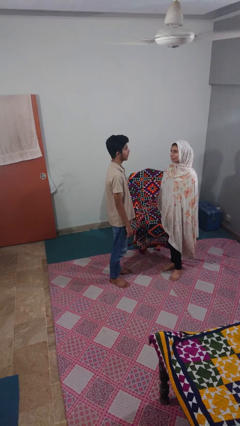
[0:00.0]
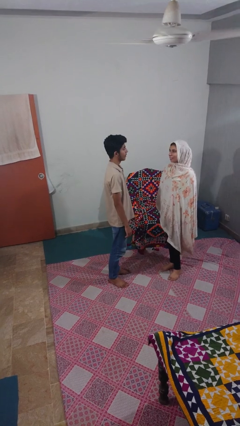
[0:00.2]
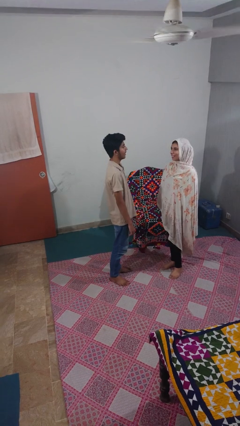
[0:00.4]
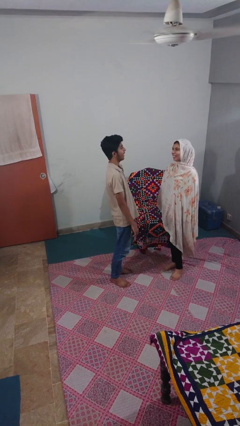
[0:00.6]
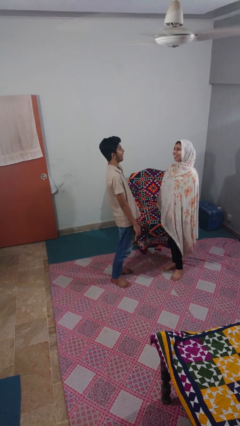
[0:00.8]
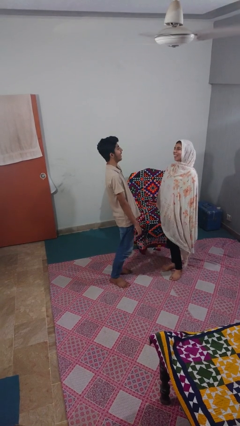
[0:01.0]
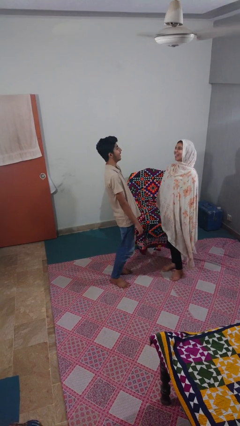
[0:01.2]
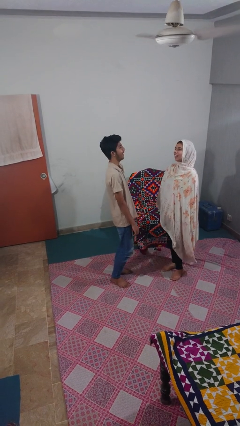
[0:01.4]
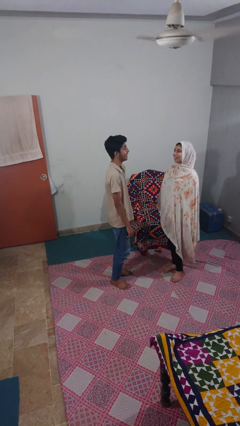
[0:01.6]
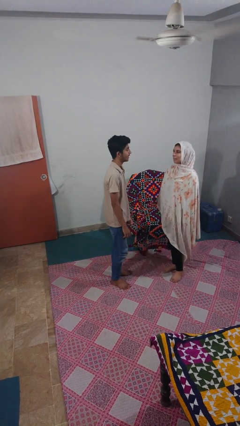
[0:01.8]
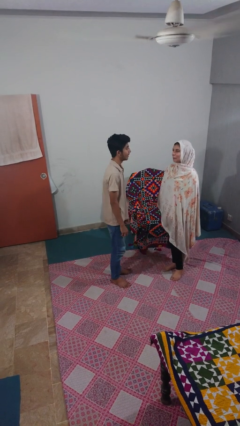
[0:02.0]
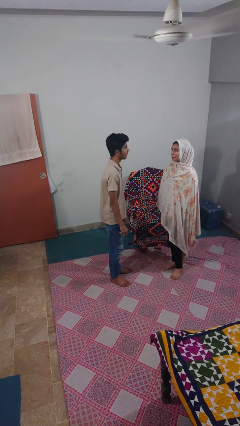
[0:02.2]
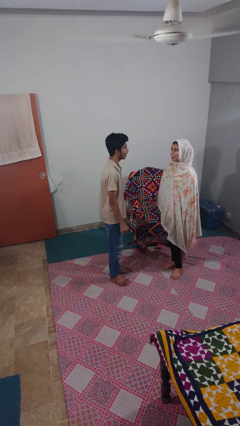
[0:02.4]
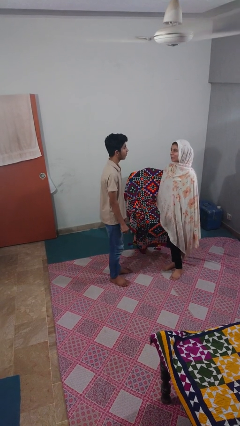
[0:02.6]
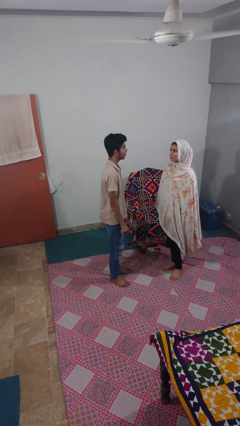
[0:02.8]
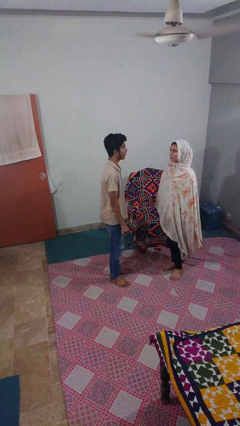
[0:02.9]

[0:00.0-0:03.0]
person laughs with person

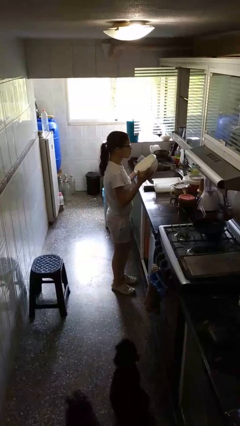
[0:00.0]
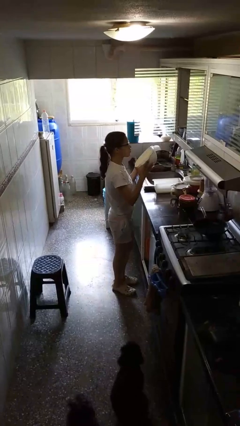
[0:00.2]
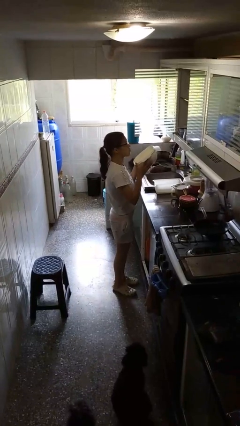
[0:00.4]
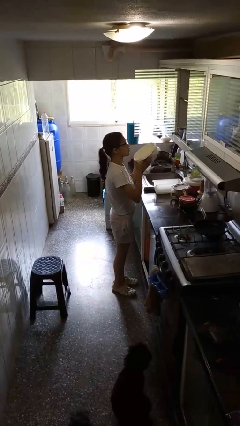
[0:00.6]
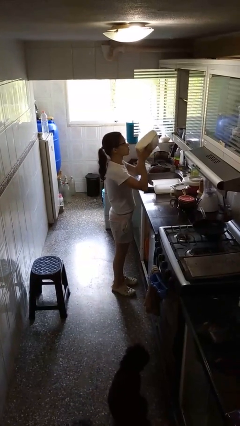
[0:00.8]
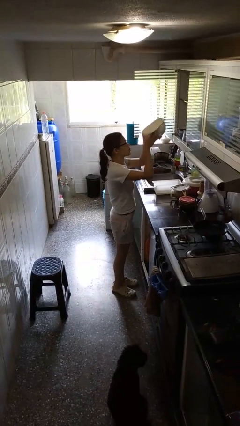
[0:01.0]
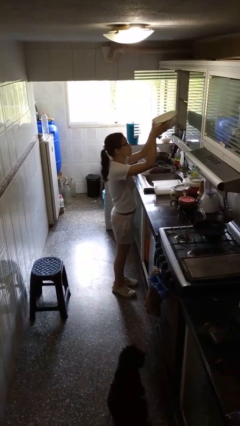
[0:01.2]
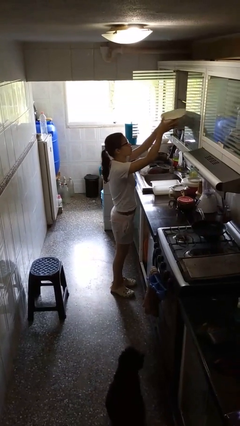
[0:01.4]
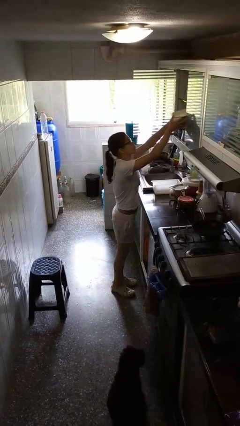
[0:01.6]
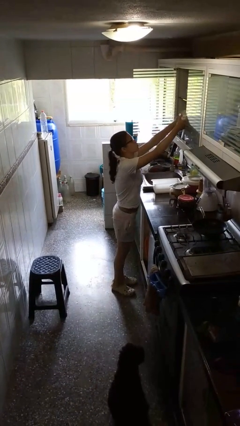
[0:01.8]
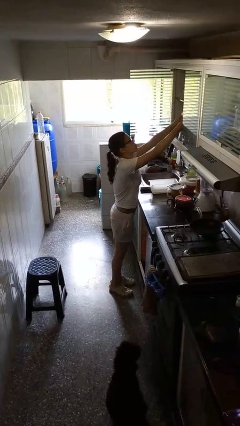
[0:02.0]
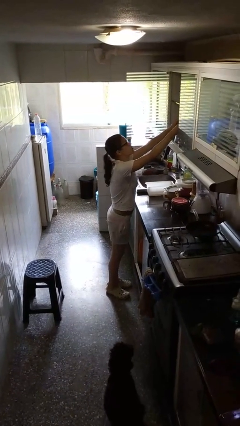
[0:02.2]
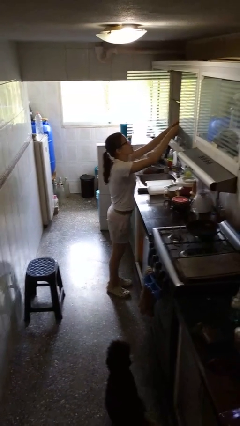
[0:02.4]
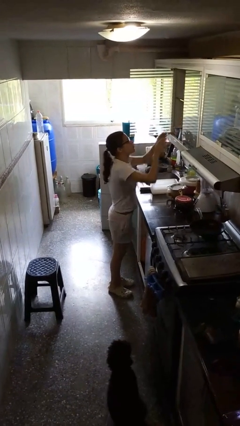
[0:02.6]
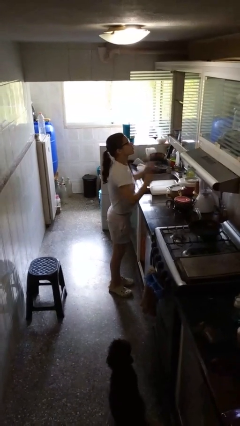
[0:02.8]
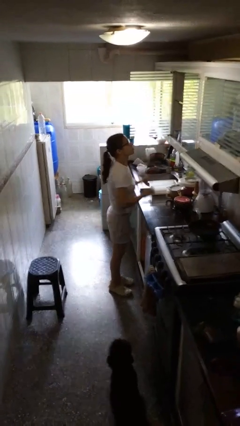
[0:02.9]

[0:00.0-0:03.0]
person puts down object into cabinet

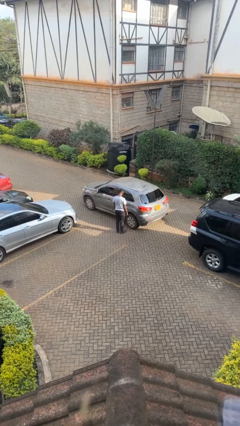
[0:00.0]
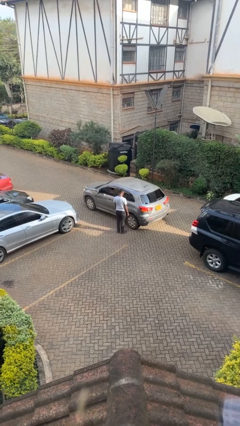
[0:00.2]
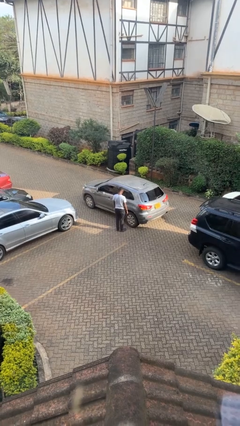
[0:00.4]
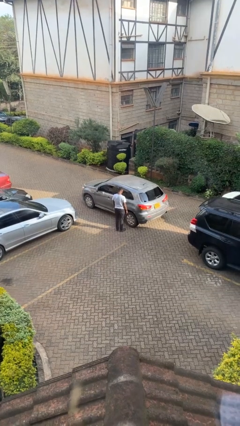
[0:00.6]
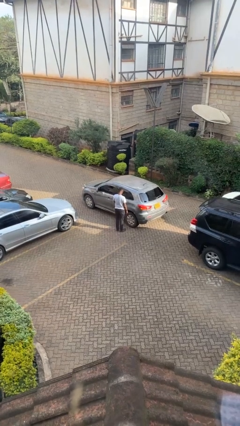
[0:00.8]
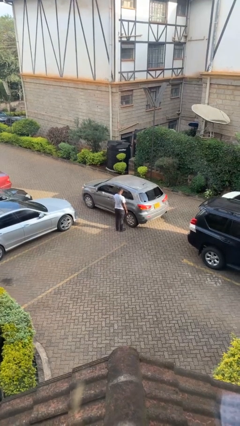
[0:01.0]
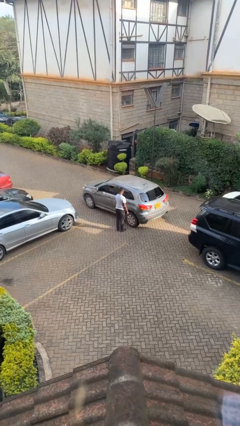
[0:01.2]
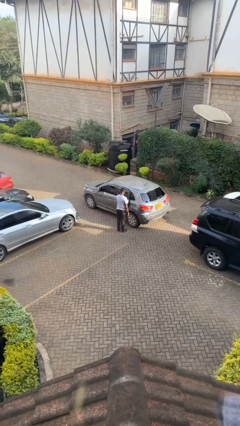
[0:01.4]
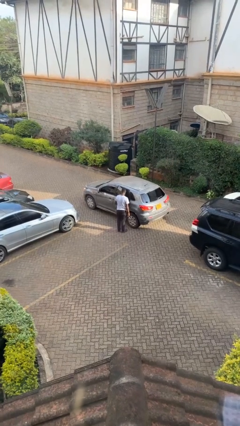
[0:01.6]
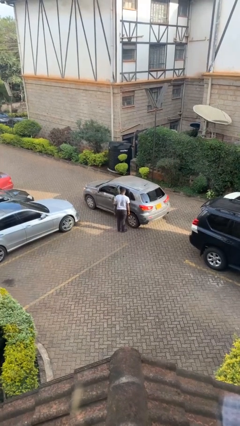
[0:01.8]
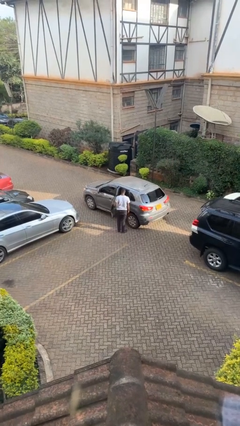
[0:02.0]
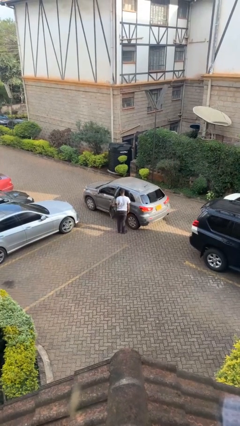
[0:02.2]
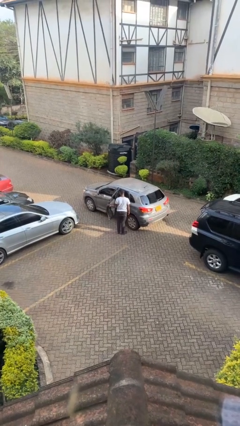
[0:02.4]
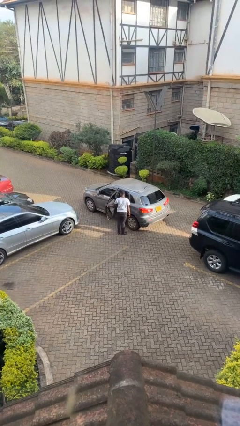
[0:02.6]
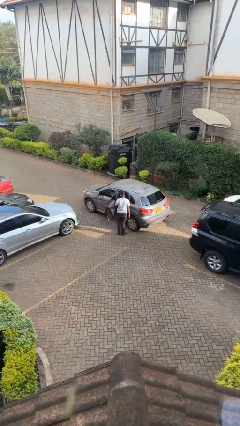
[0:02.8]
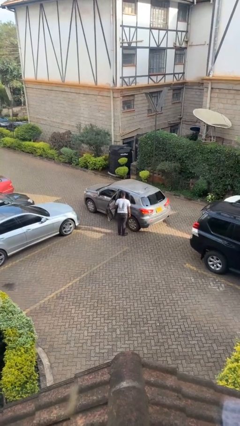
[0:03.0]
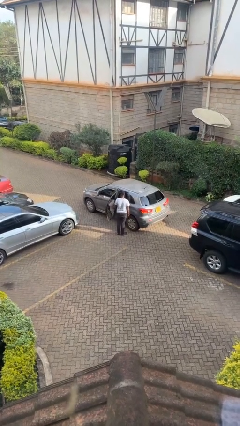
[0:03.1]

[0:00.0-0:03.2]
person opens car door

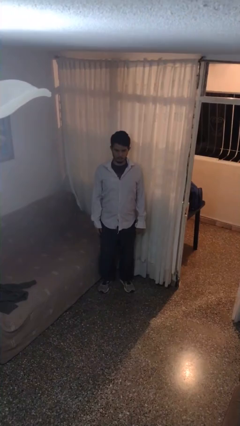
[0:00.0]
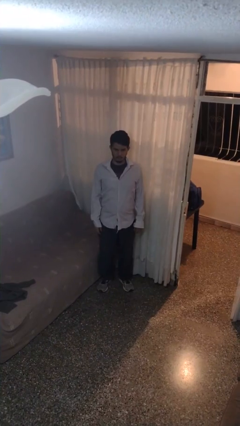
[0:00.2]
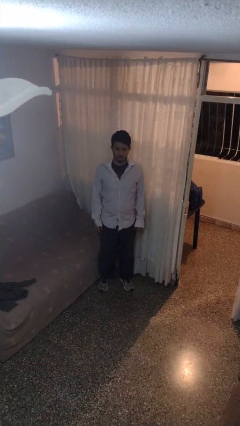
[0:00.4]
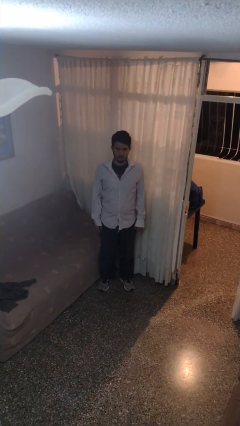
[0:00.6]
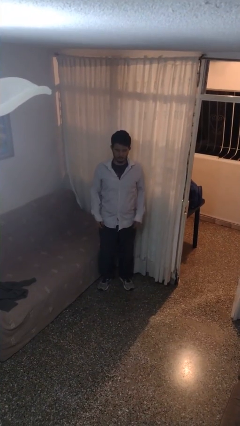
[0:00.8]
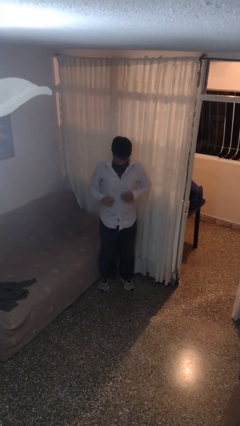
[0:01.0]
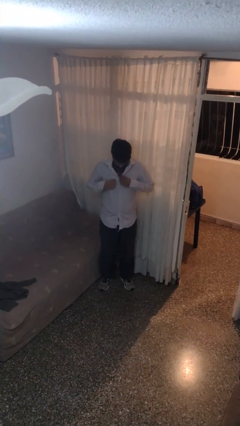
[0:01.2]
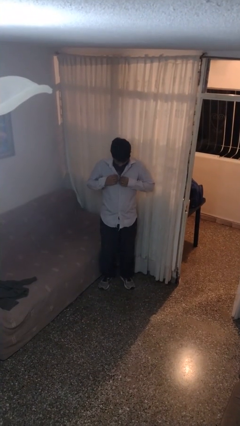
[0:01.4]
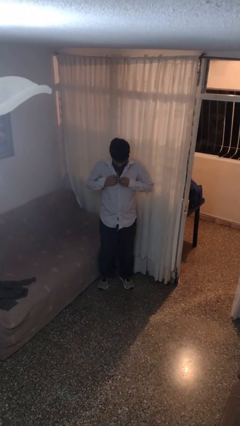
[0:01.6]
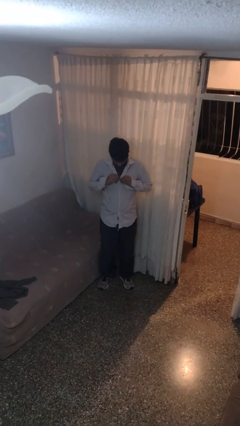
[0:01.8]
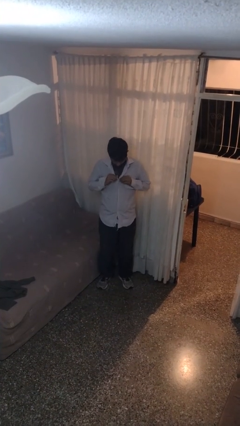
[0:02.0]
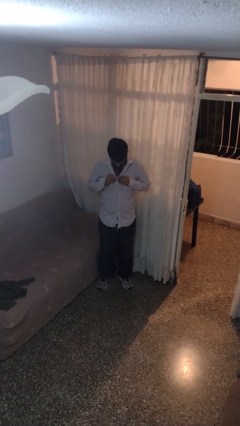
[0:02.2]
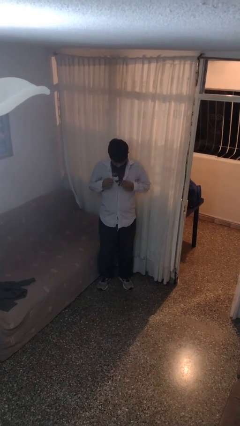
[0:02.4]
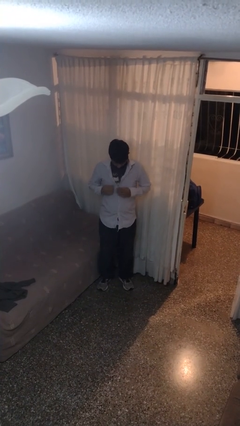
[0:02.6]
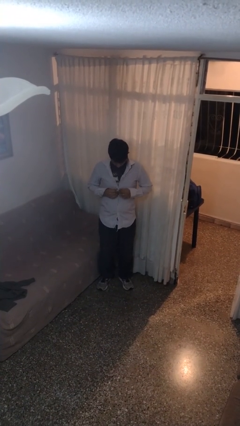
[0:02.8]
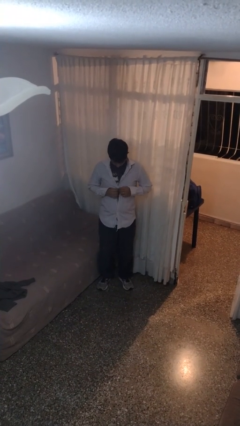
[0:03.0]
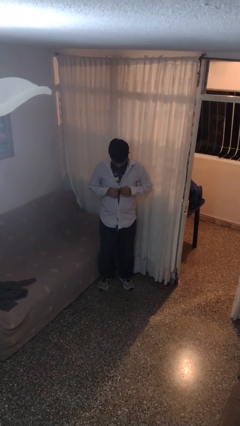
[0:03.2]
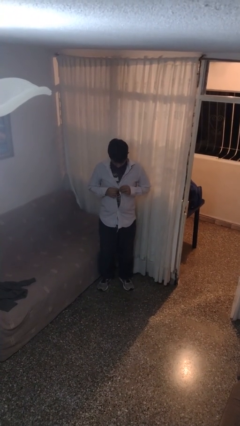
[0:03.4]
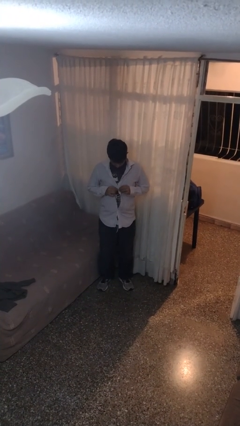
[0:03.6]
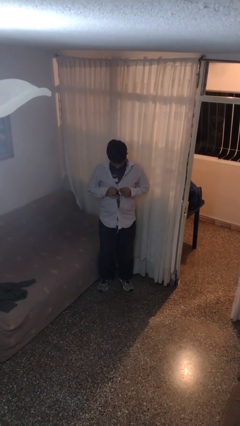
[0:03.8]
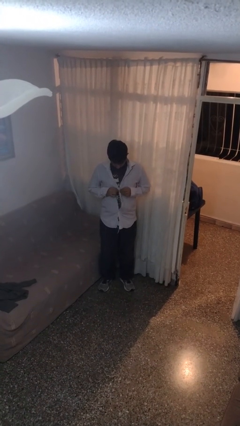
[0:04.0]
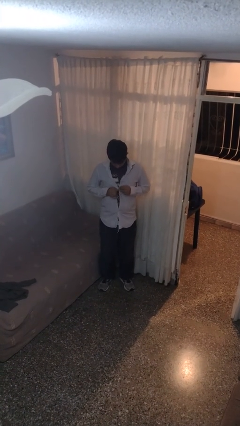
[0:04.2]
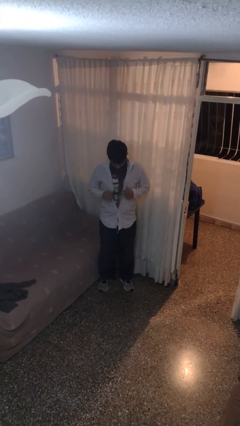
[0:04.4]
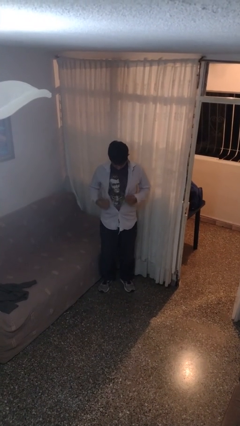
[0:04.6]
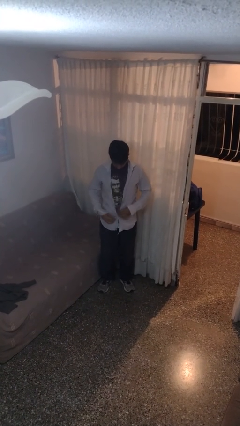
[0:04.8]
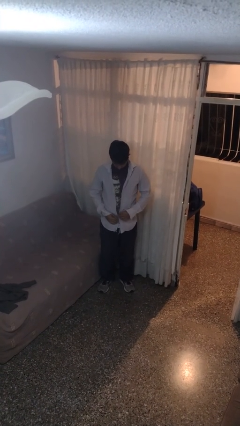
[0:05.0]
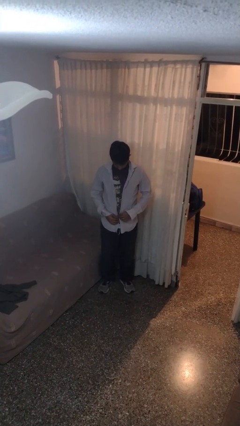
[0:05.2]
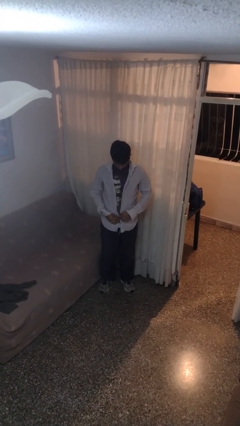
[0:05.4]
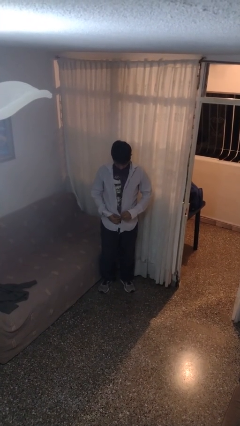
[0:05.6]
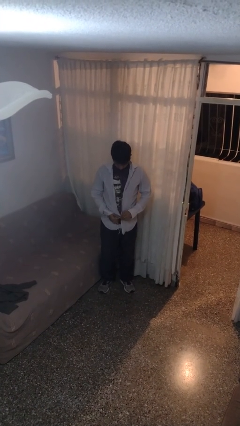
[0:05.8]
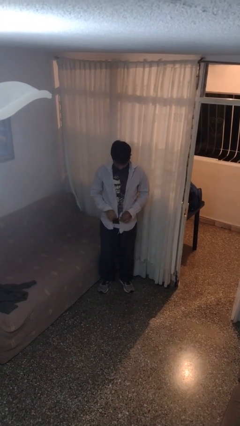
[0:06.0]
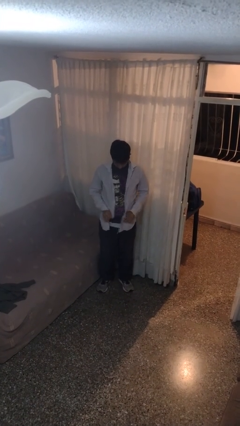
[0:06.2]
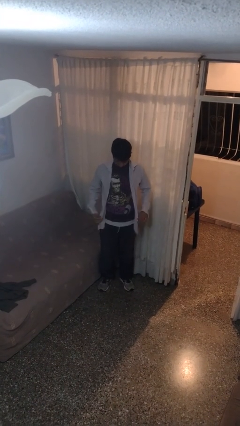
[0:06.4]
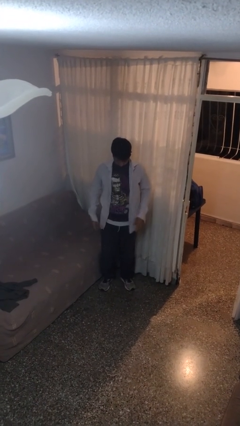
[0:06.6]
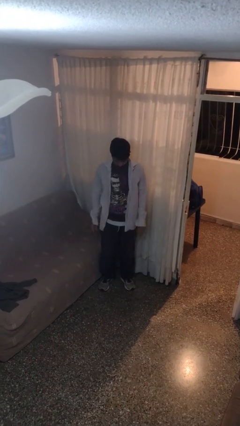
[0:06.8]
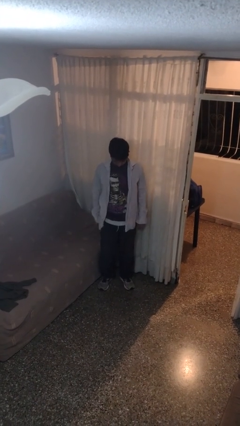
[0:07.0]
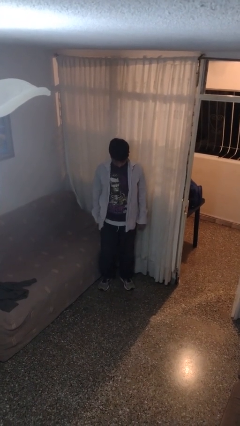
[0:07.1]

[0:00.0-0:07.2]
person unbuttons shirt
